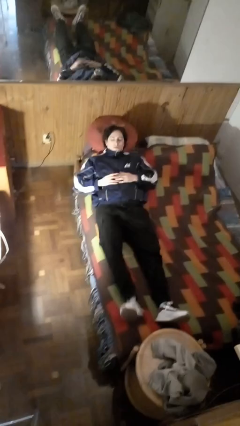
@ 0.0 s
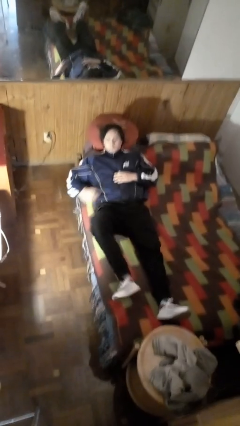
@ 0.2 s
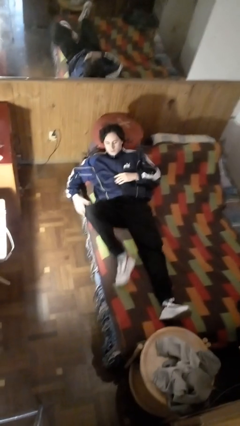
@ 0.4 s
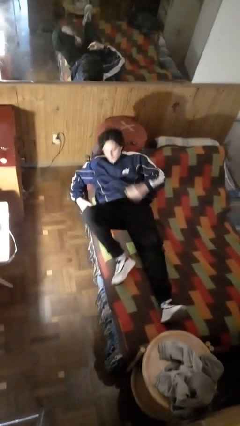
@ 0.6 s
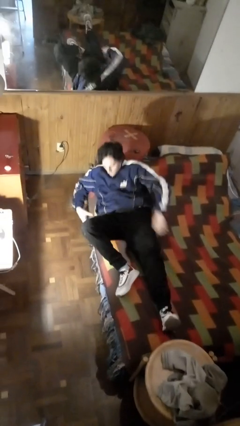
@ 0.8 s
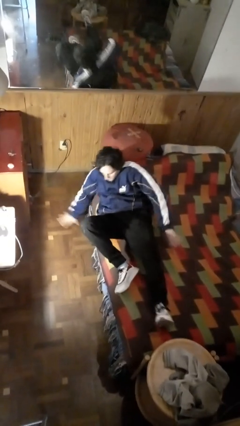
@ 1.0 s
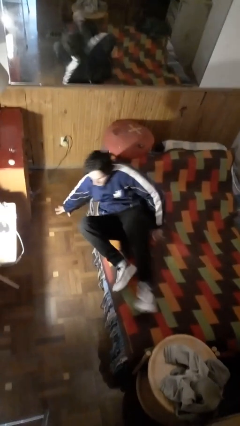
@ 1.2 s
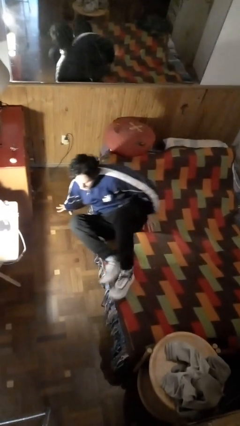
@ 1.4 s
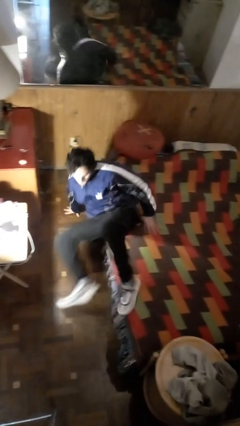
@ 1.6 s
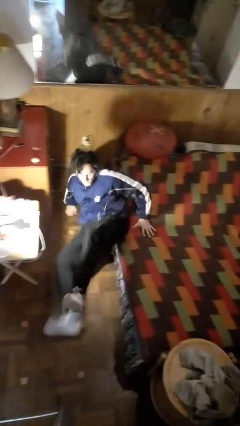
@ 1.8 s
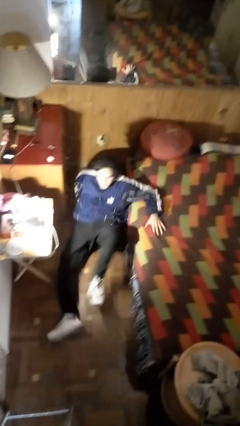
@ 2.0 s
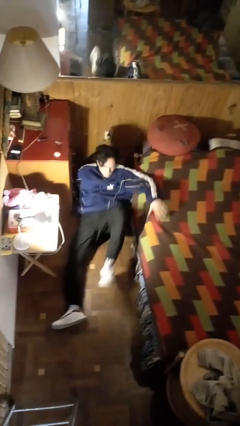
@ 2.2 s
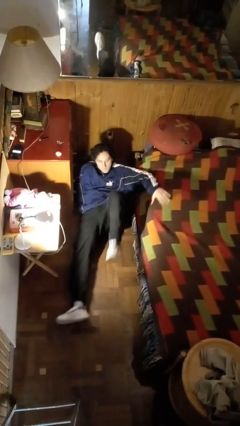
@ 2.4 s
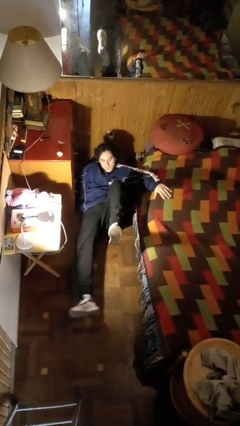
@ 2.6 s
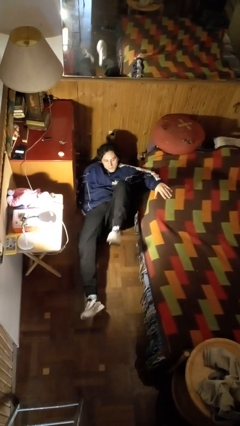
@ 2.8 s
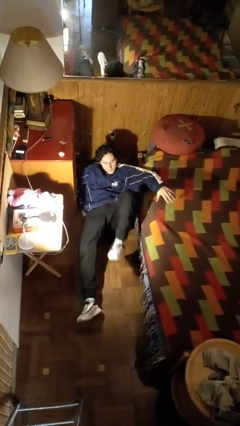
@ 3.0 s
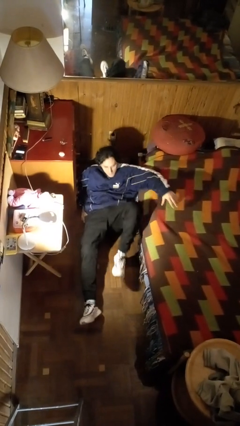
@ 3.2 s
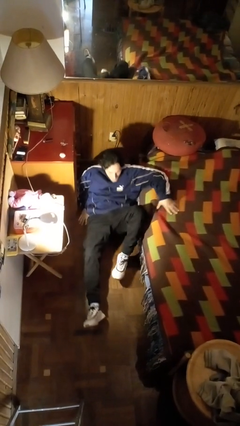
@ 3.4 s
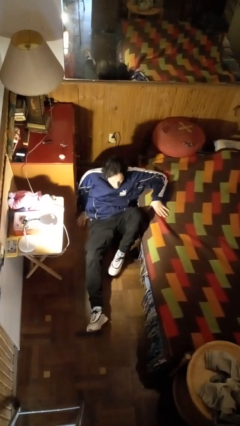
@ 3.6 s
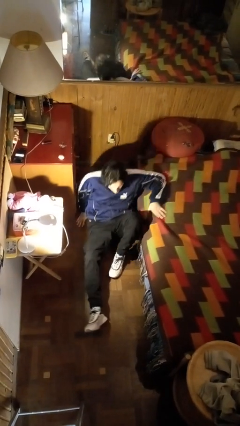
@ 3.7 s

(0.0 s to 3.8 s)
person falls from bed

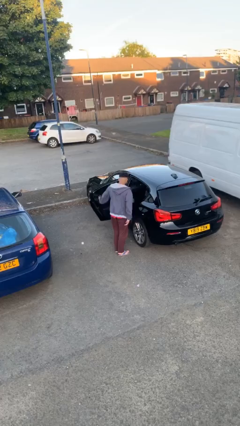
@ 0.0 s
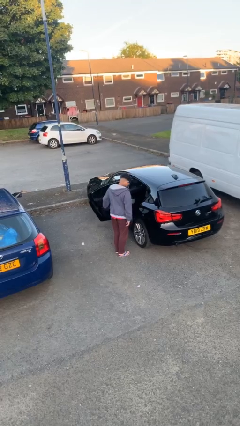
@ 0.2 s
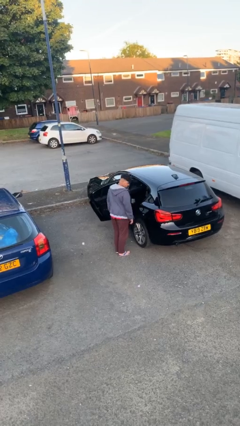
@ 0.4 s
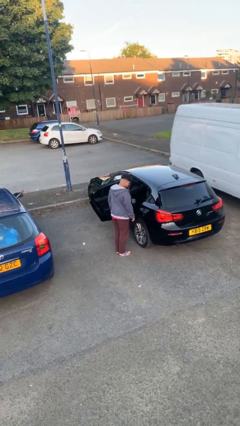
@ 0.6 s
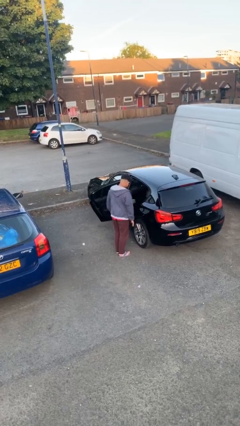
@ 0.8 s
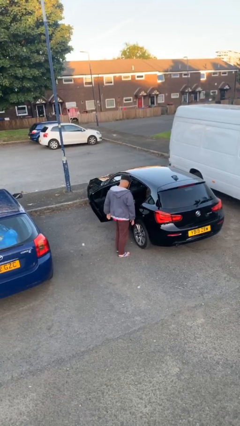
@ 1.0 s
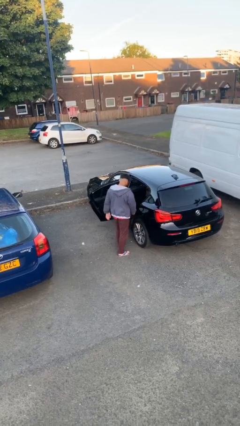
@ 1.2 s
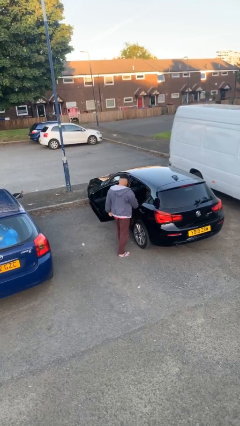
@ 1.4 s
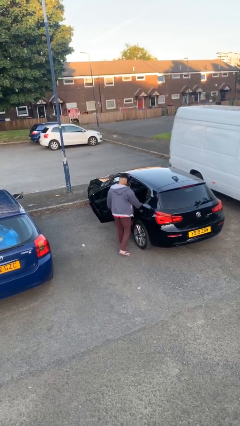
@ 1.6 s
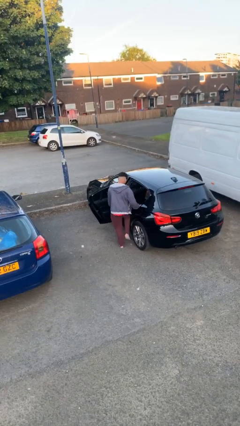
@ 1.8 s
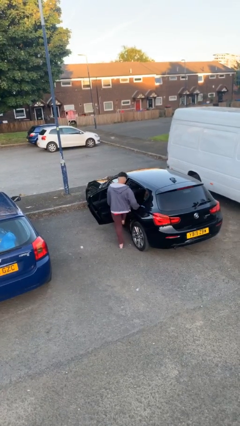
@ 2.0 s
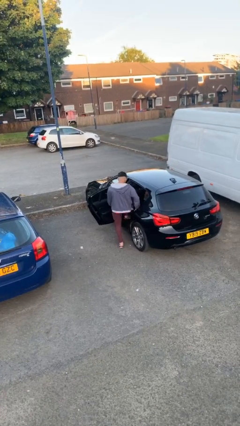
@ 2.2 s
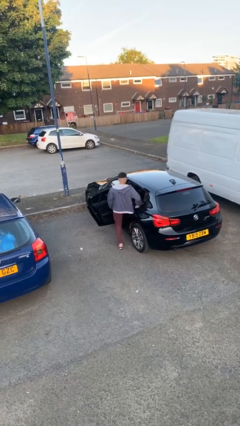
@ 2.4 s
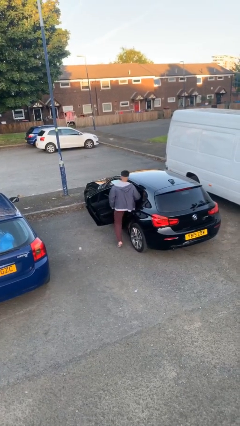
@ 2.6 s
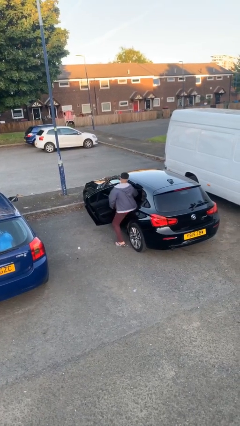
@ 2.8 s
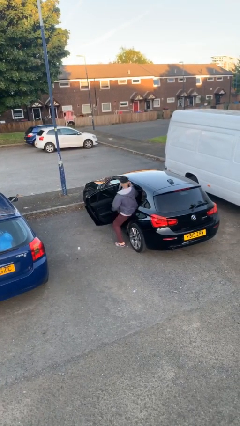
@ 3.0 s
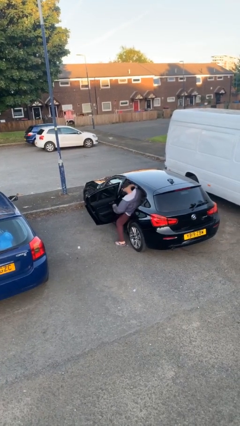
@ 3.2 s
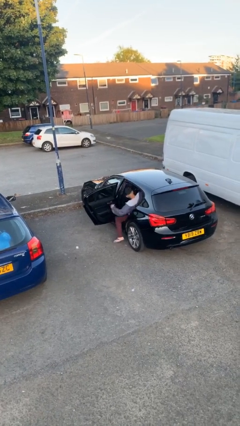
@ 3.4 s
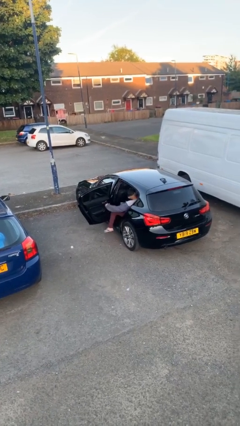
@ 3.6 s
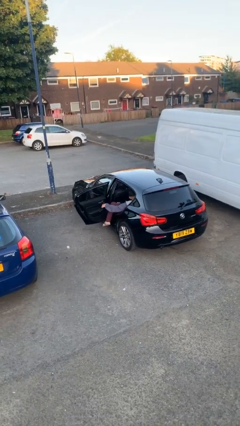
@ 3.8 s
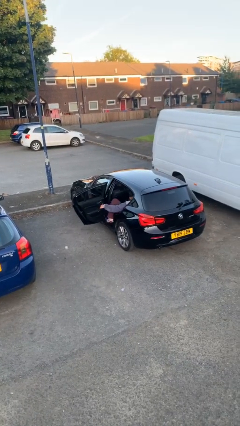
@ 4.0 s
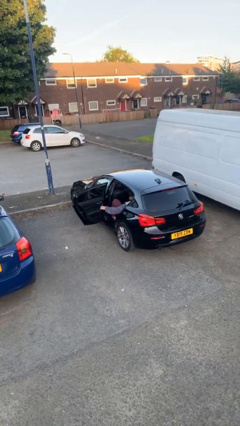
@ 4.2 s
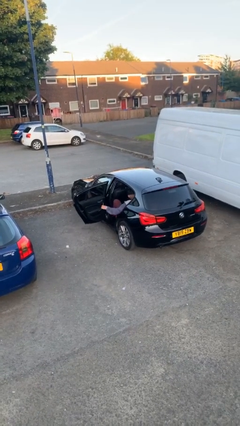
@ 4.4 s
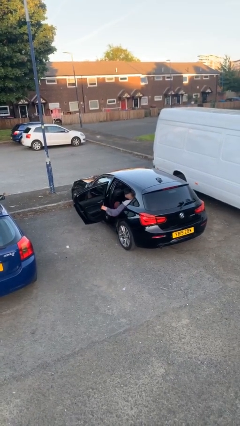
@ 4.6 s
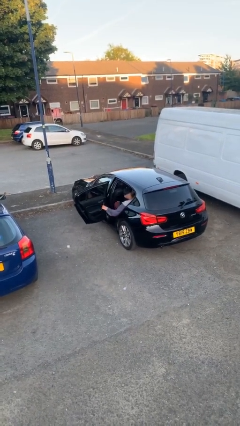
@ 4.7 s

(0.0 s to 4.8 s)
person enters car

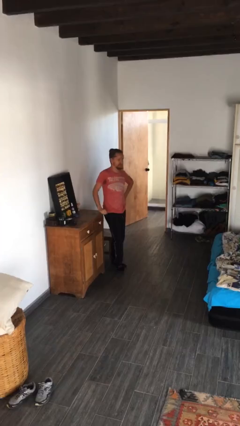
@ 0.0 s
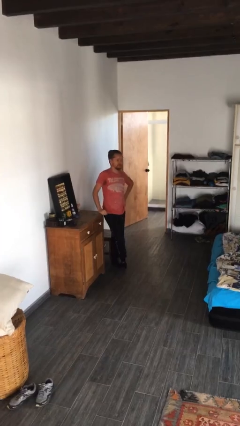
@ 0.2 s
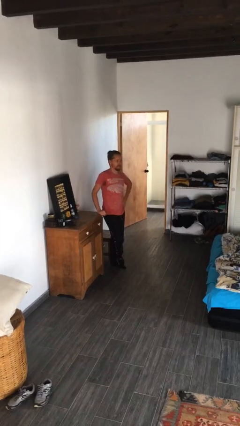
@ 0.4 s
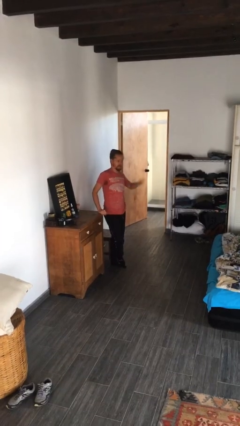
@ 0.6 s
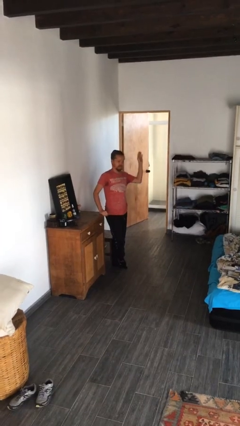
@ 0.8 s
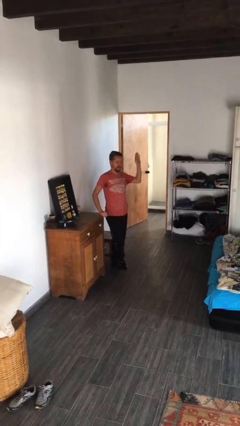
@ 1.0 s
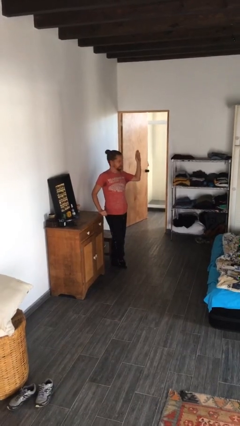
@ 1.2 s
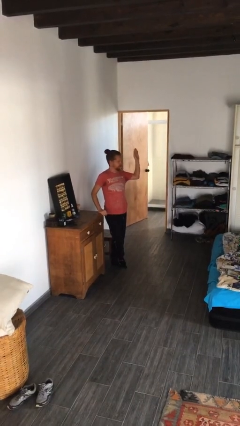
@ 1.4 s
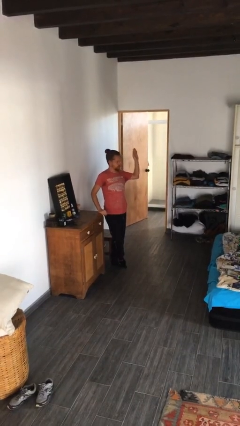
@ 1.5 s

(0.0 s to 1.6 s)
person gestures raise hand

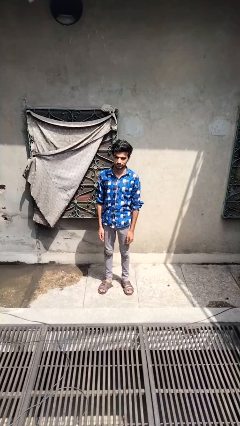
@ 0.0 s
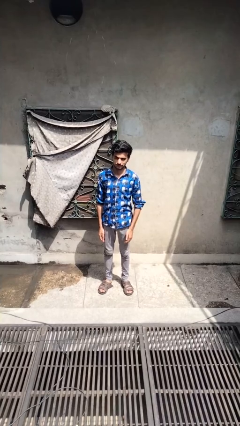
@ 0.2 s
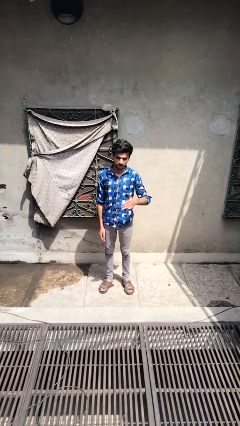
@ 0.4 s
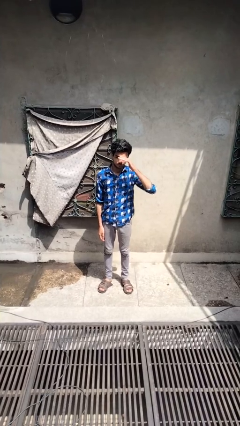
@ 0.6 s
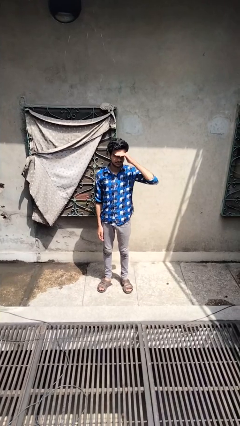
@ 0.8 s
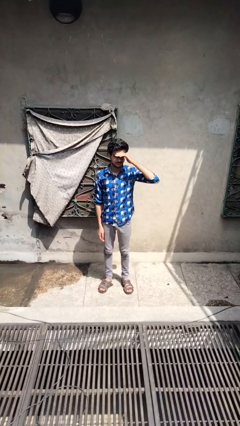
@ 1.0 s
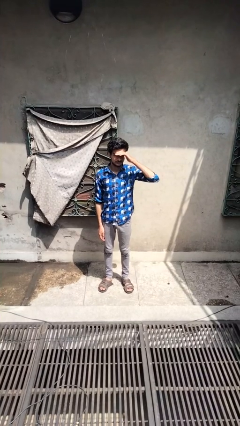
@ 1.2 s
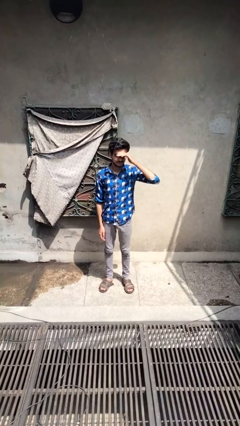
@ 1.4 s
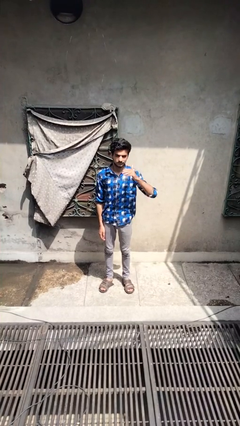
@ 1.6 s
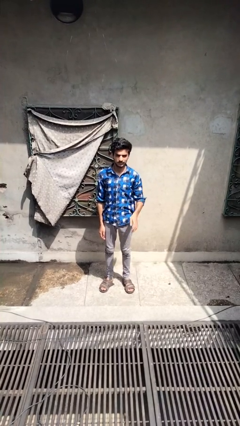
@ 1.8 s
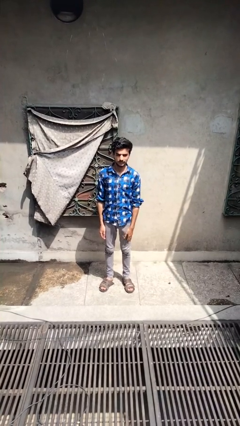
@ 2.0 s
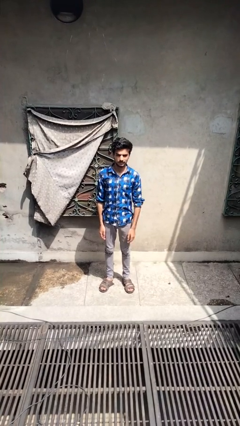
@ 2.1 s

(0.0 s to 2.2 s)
person shades eyes

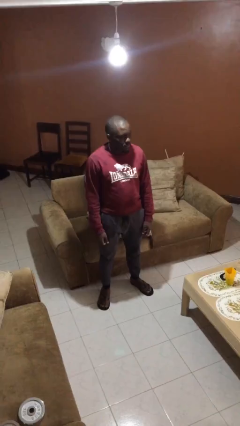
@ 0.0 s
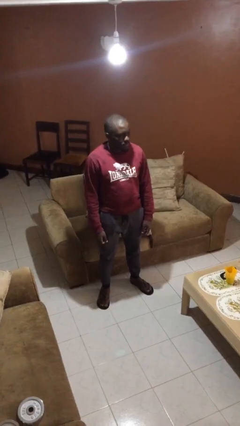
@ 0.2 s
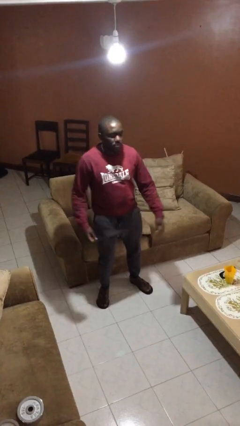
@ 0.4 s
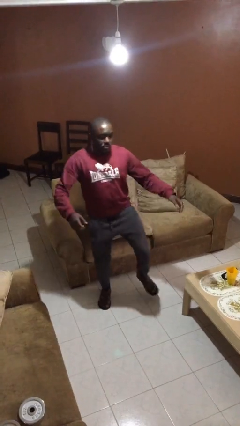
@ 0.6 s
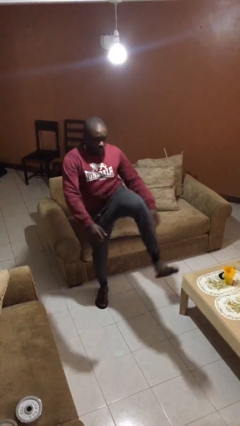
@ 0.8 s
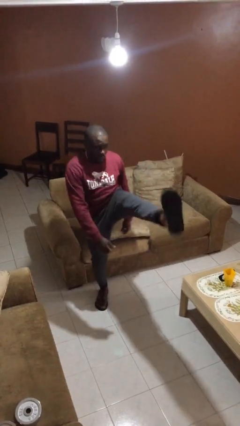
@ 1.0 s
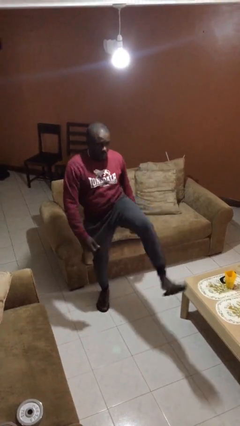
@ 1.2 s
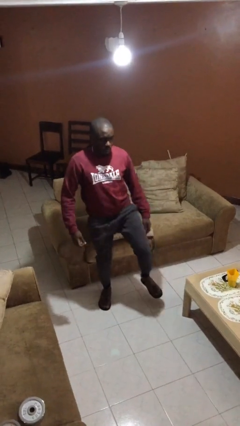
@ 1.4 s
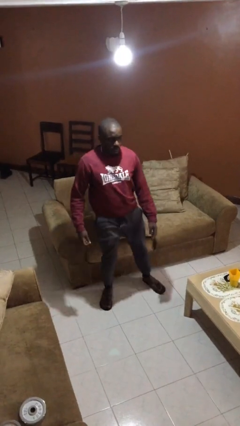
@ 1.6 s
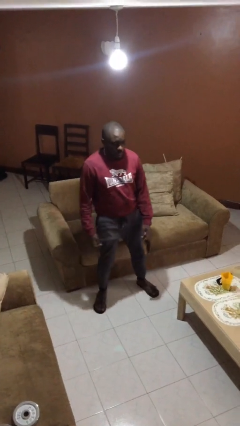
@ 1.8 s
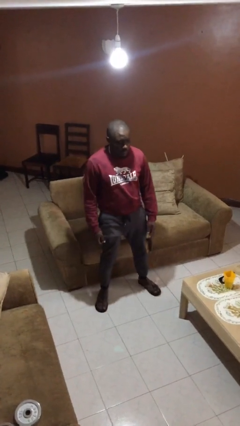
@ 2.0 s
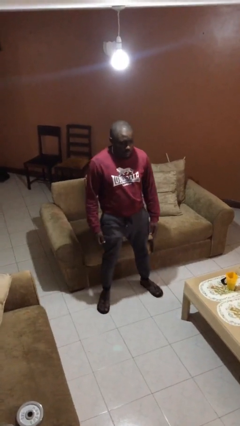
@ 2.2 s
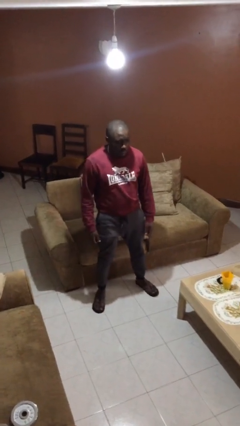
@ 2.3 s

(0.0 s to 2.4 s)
person karate kicks

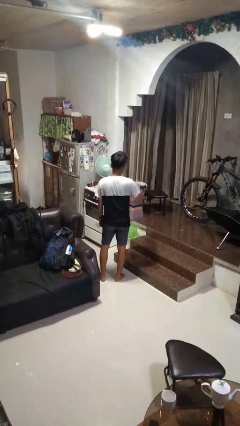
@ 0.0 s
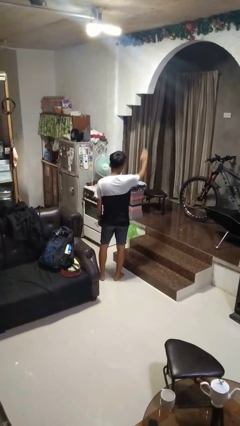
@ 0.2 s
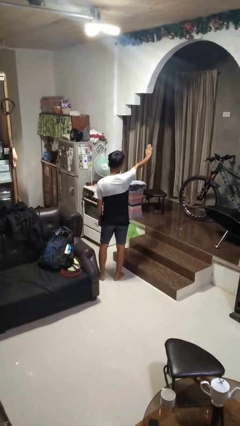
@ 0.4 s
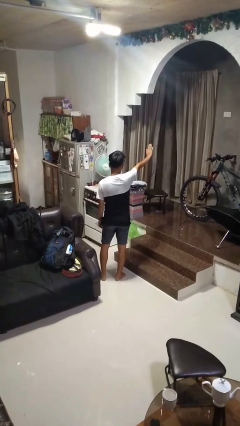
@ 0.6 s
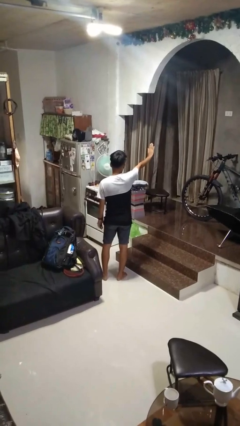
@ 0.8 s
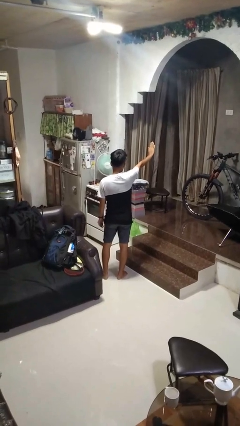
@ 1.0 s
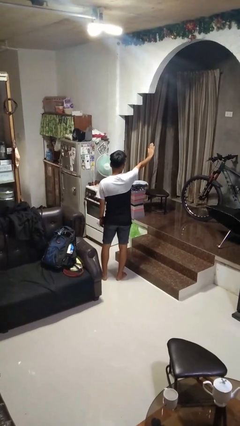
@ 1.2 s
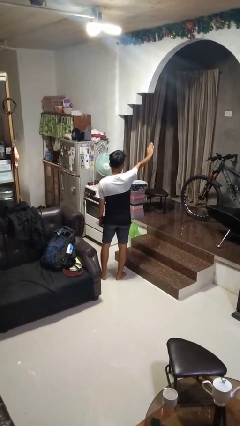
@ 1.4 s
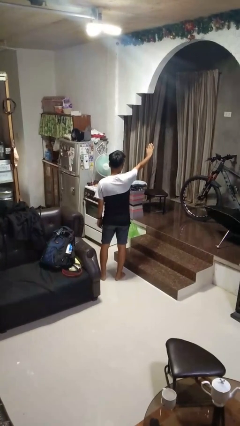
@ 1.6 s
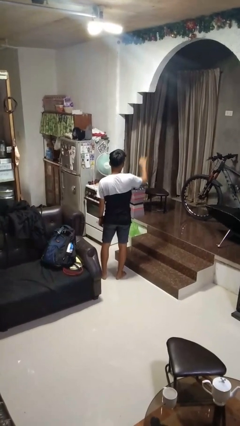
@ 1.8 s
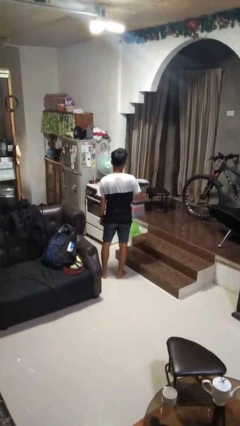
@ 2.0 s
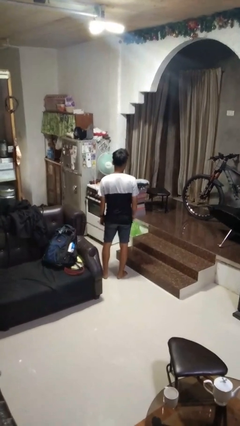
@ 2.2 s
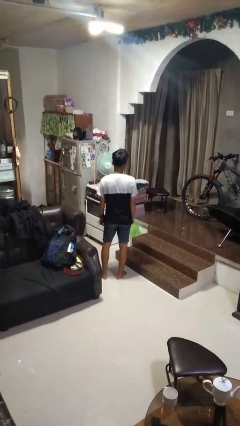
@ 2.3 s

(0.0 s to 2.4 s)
person gestures stop
